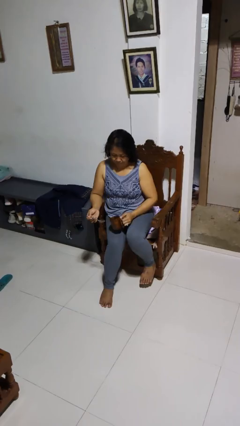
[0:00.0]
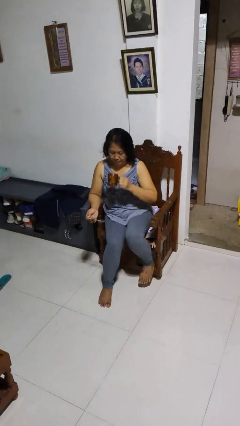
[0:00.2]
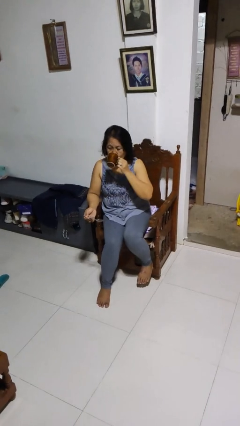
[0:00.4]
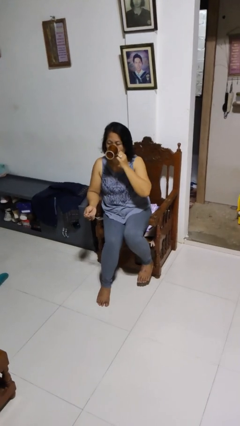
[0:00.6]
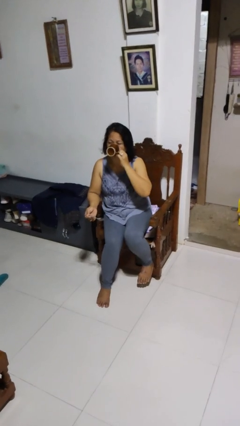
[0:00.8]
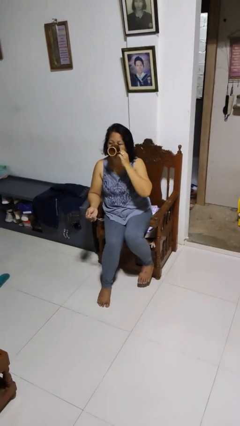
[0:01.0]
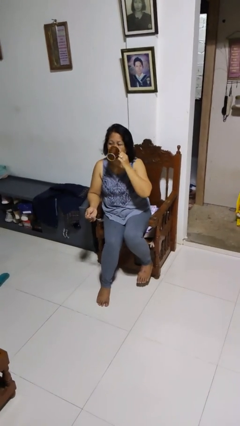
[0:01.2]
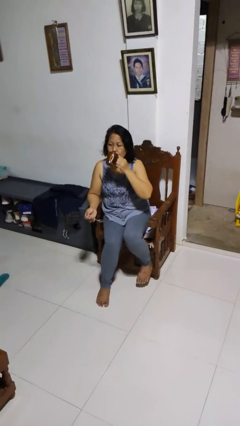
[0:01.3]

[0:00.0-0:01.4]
person drinks from mug

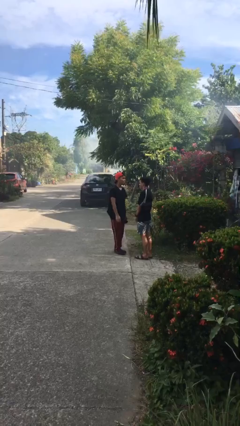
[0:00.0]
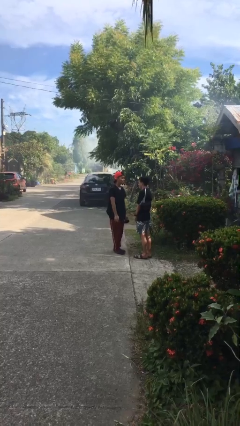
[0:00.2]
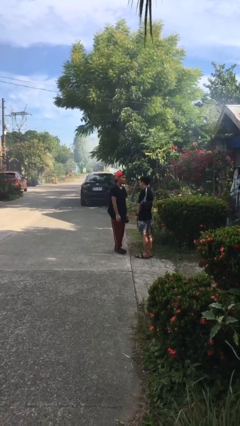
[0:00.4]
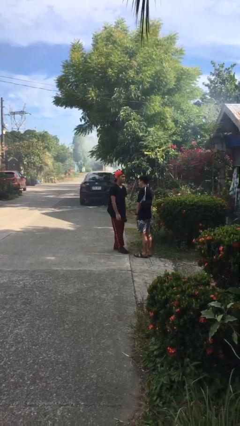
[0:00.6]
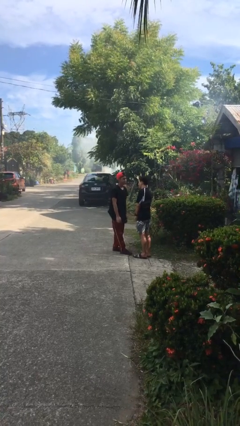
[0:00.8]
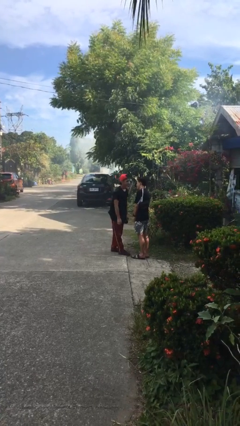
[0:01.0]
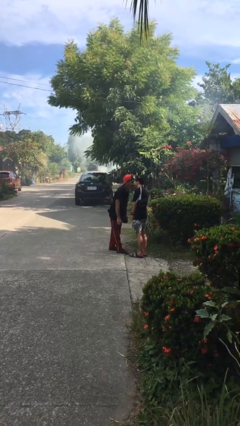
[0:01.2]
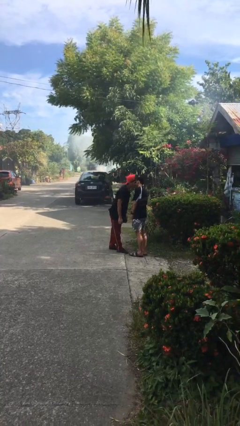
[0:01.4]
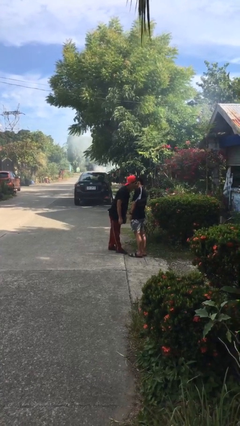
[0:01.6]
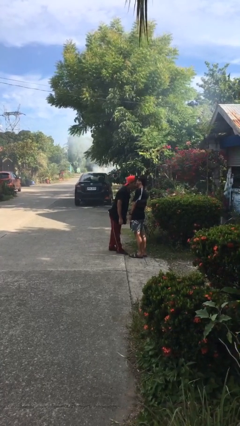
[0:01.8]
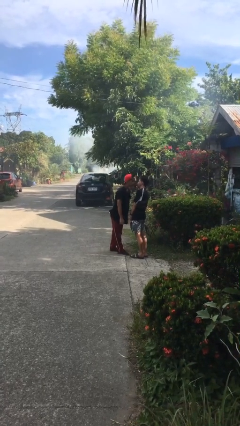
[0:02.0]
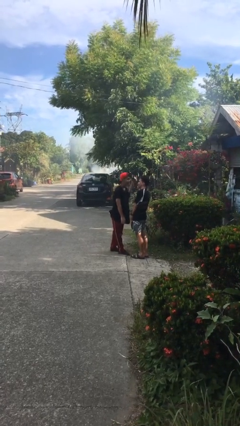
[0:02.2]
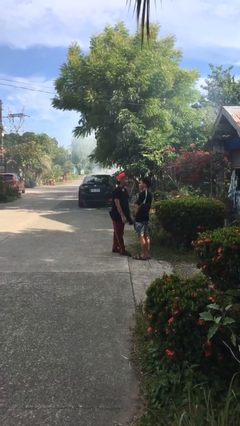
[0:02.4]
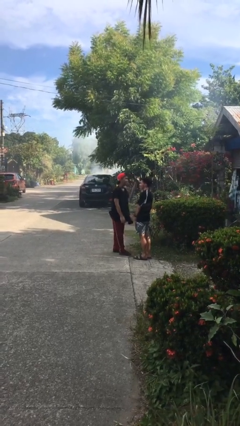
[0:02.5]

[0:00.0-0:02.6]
person kisses cheek of person

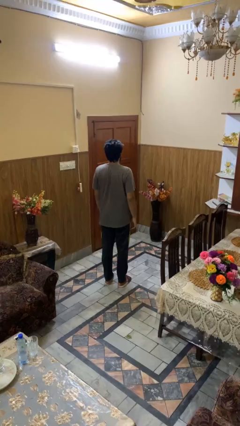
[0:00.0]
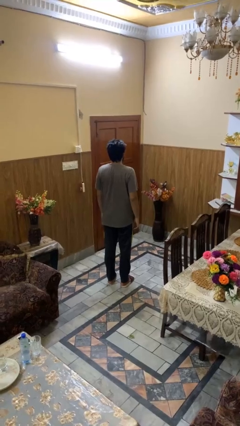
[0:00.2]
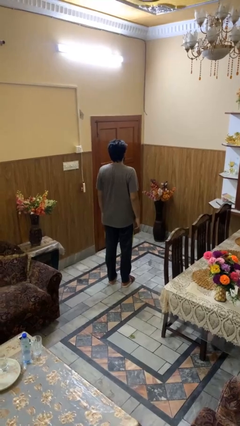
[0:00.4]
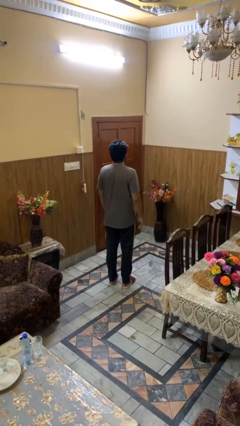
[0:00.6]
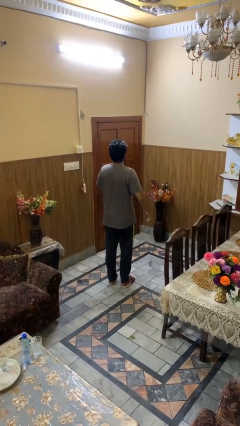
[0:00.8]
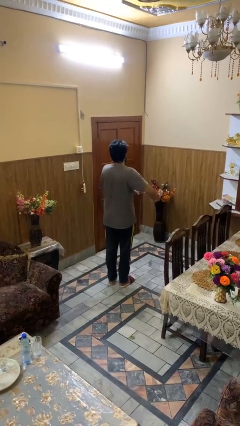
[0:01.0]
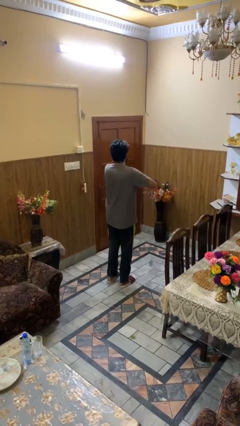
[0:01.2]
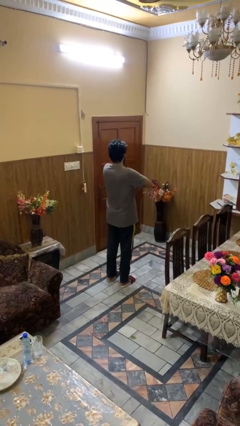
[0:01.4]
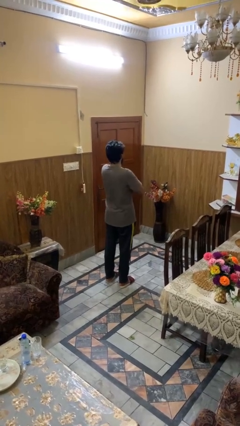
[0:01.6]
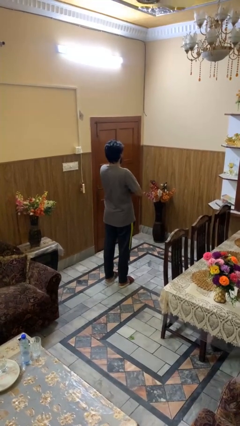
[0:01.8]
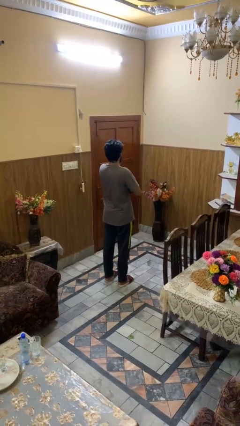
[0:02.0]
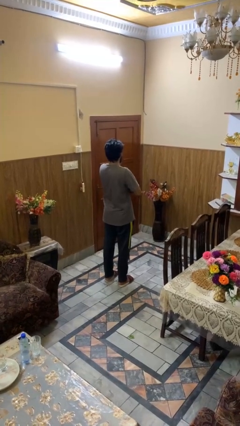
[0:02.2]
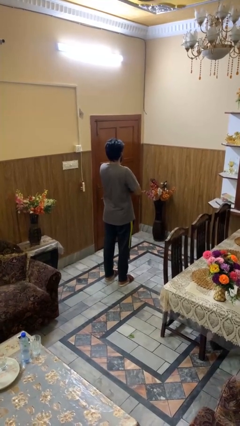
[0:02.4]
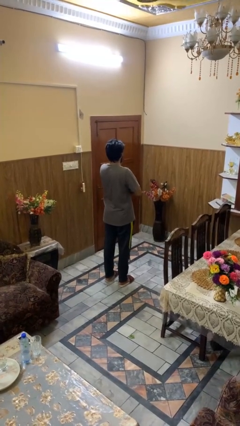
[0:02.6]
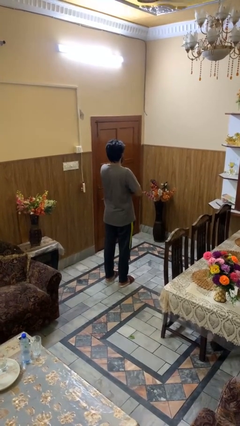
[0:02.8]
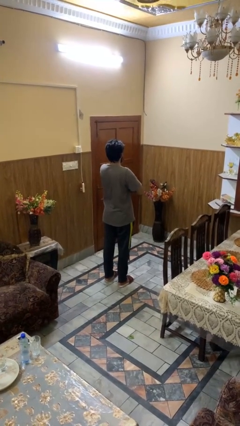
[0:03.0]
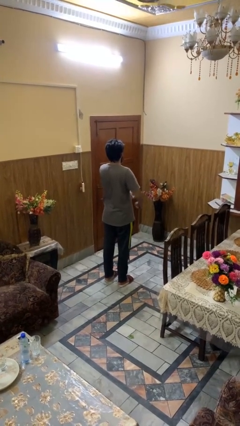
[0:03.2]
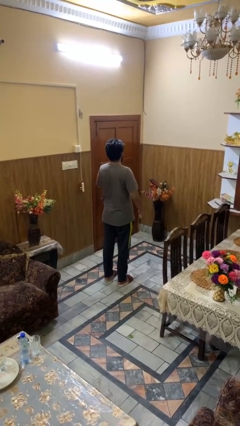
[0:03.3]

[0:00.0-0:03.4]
person crosses arms

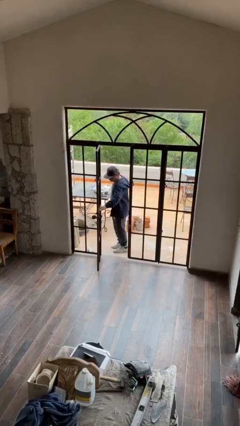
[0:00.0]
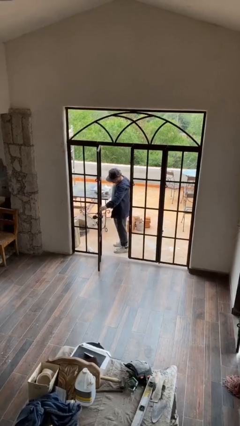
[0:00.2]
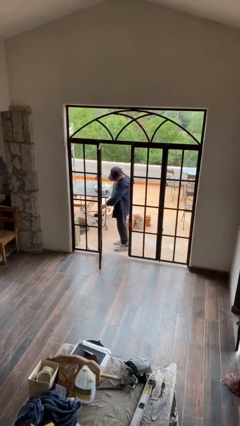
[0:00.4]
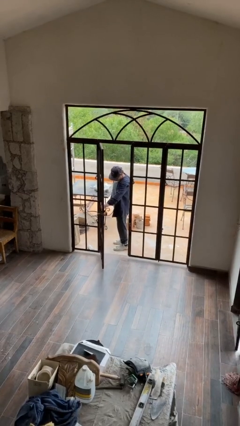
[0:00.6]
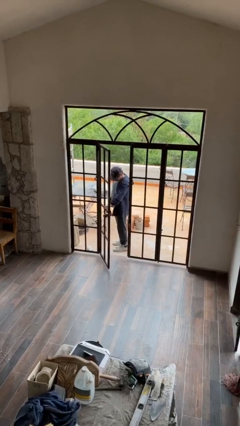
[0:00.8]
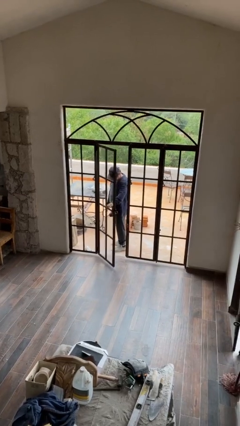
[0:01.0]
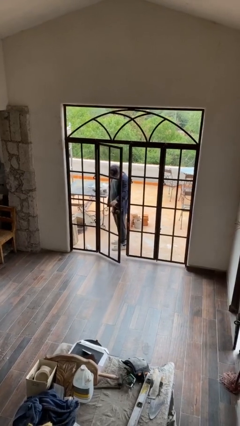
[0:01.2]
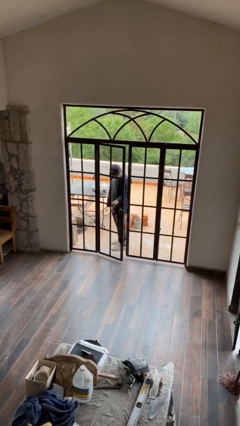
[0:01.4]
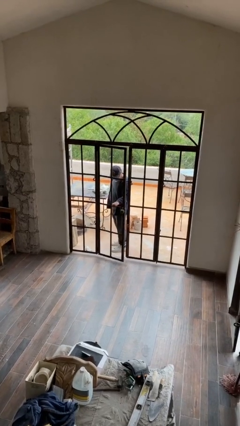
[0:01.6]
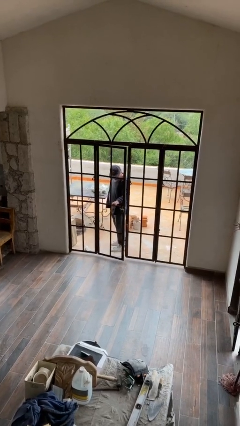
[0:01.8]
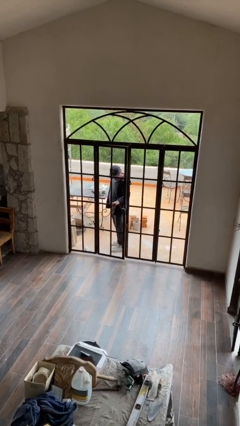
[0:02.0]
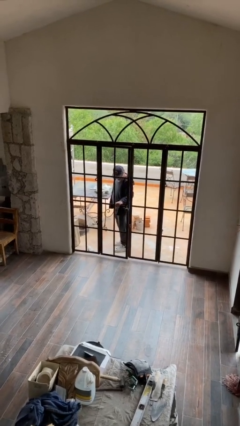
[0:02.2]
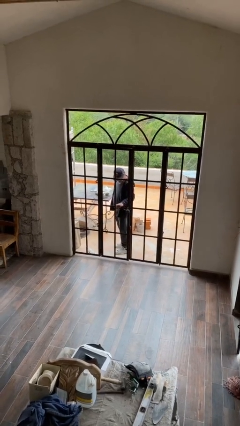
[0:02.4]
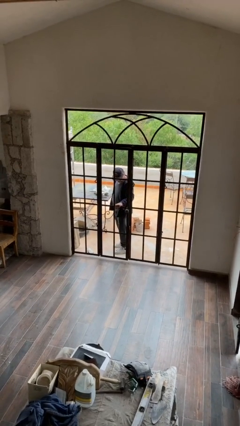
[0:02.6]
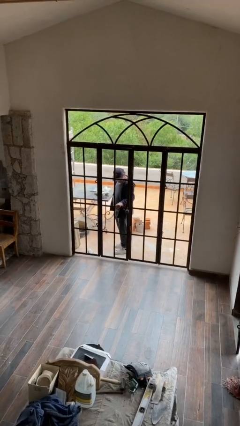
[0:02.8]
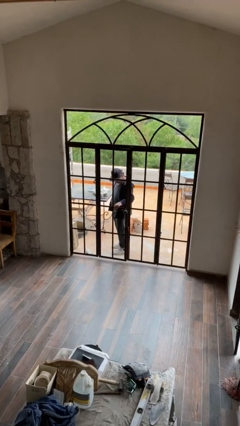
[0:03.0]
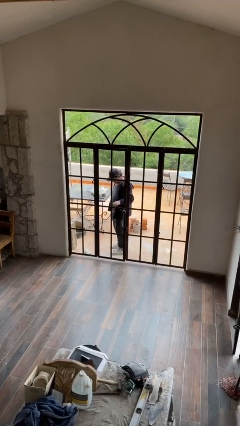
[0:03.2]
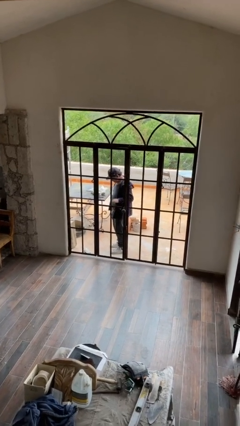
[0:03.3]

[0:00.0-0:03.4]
person closes facility door

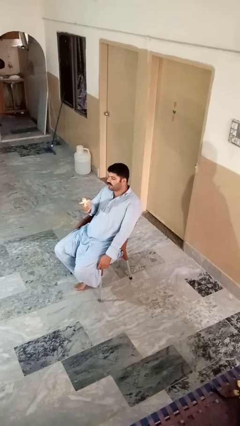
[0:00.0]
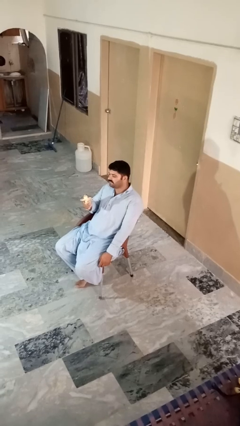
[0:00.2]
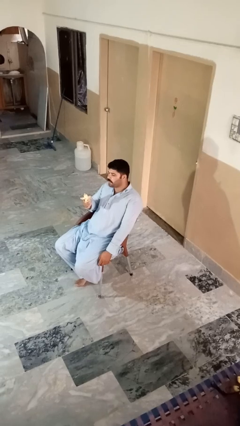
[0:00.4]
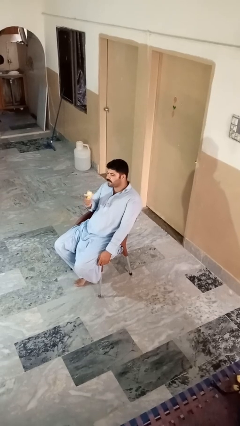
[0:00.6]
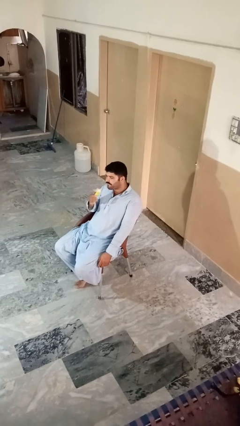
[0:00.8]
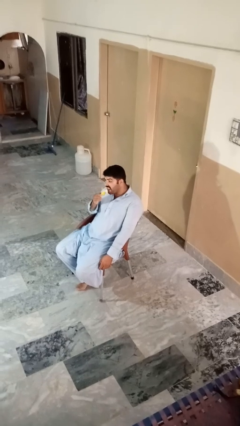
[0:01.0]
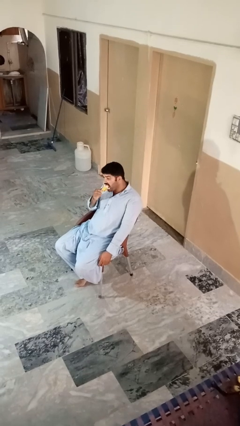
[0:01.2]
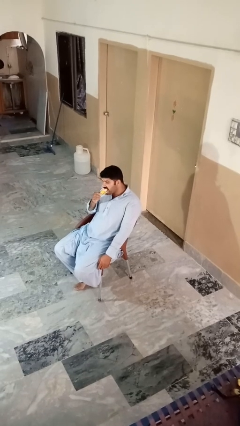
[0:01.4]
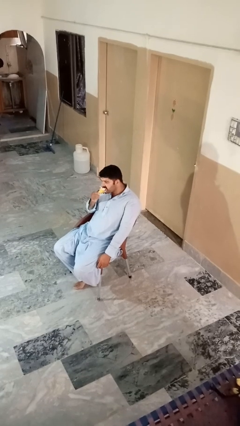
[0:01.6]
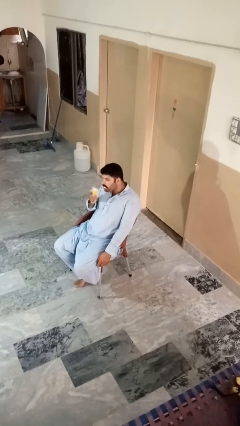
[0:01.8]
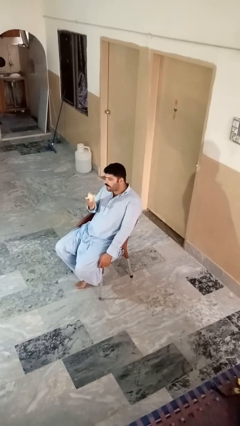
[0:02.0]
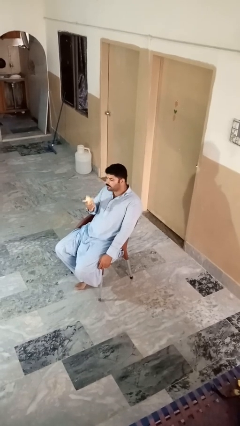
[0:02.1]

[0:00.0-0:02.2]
person eats banana

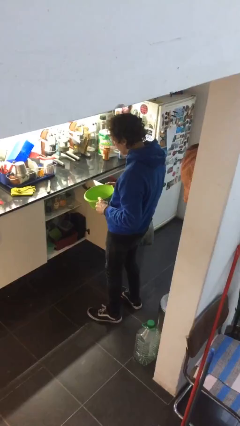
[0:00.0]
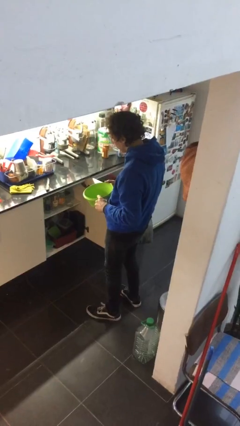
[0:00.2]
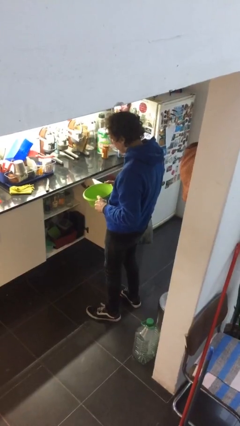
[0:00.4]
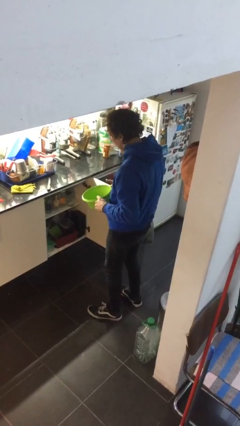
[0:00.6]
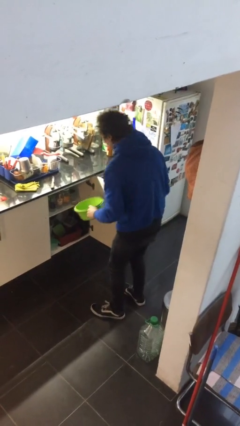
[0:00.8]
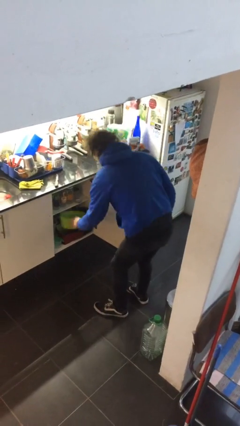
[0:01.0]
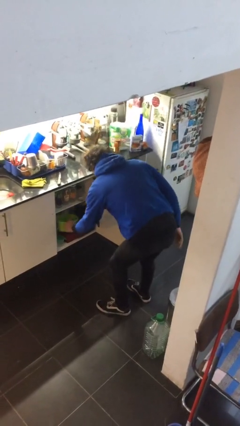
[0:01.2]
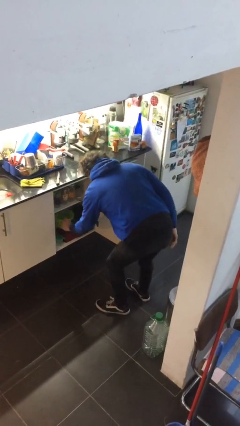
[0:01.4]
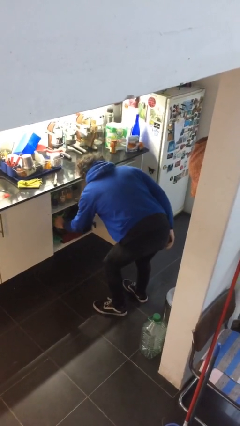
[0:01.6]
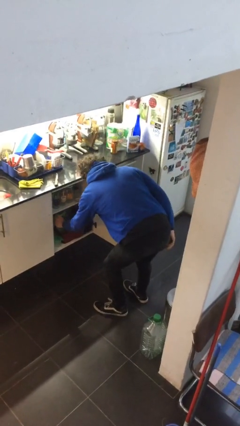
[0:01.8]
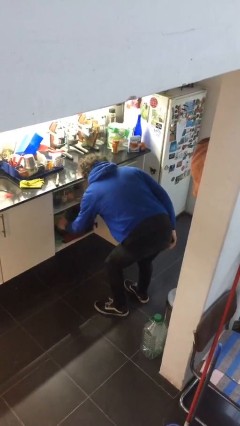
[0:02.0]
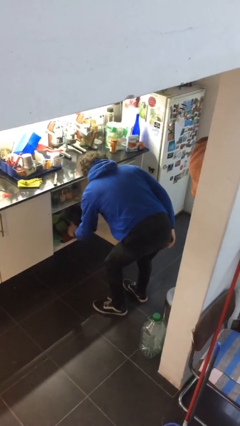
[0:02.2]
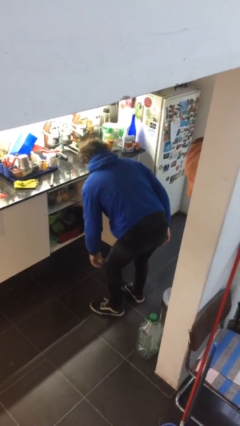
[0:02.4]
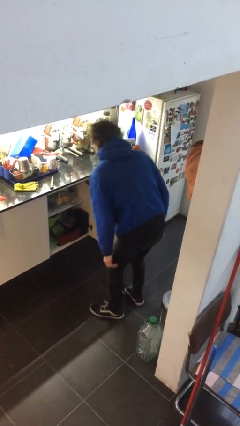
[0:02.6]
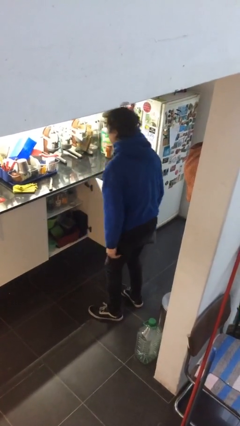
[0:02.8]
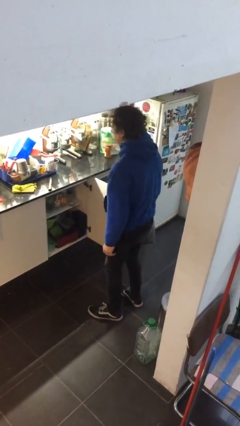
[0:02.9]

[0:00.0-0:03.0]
person puts down object into cabinet

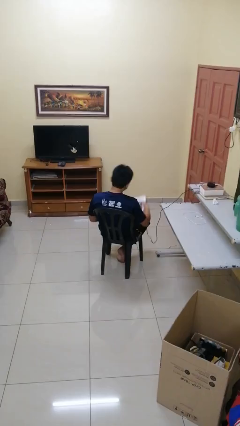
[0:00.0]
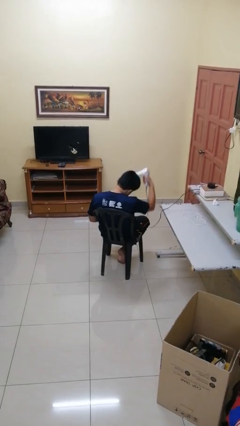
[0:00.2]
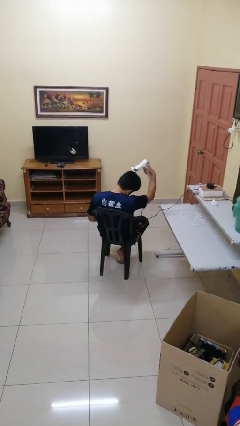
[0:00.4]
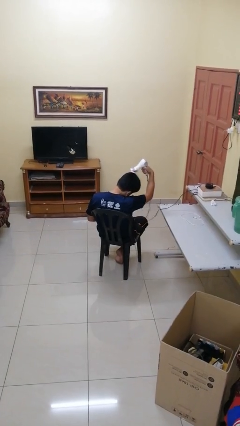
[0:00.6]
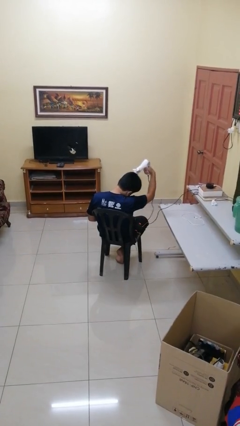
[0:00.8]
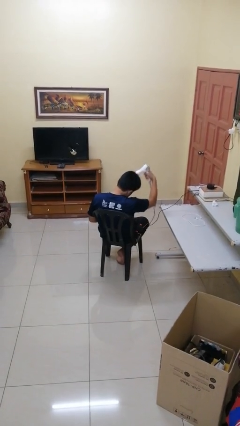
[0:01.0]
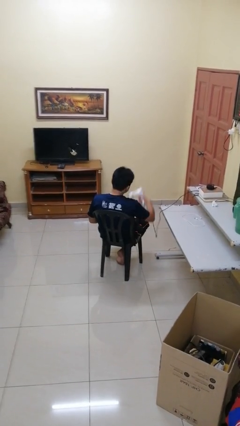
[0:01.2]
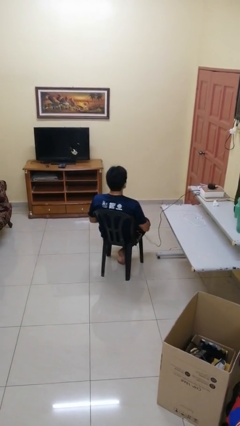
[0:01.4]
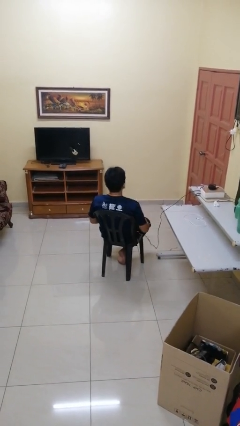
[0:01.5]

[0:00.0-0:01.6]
person dries hair with hairdryer
